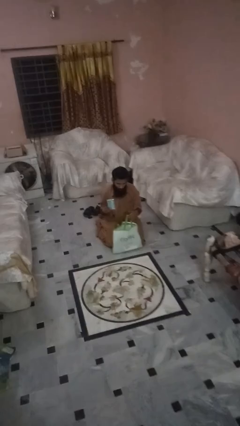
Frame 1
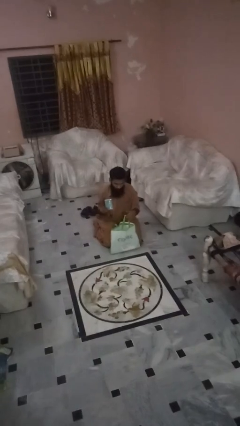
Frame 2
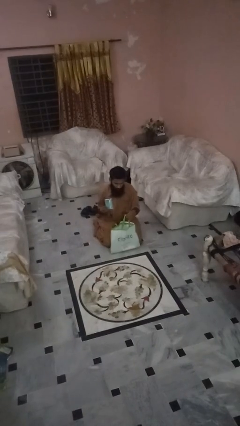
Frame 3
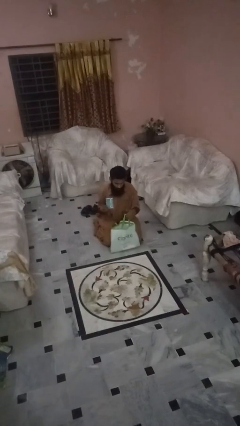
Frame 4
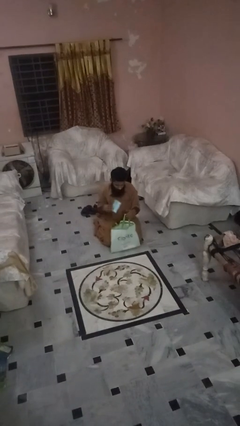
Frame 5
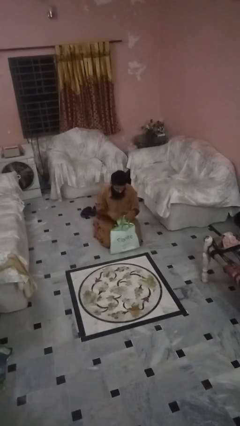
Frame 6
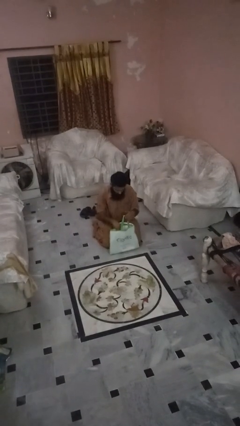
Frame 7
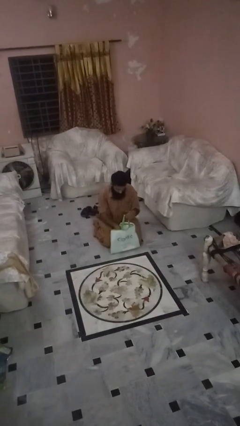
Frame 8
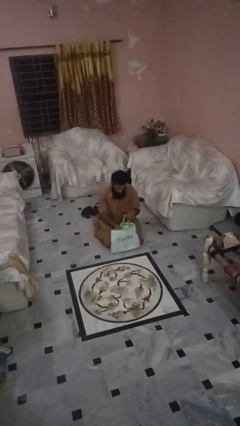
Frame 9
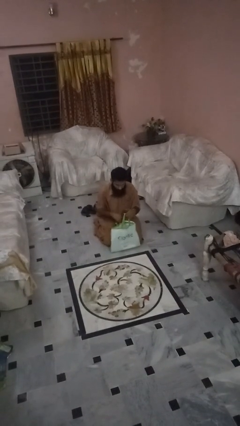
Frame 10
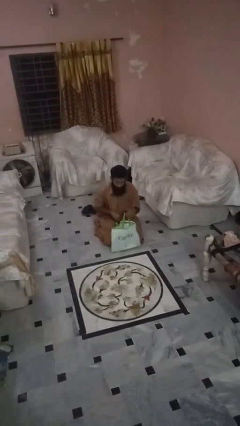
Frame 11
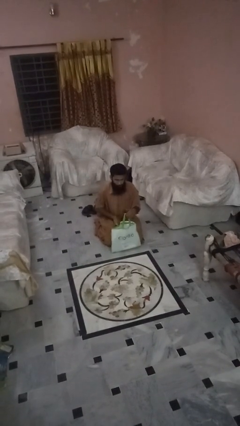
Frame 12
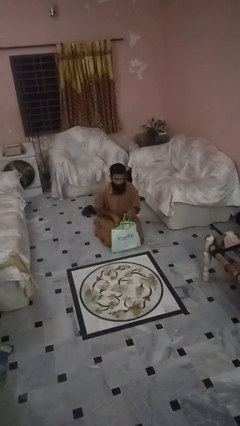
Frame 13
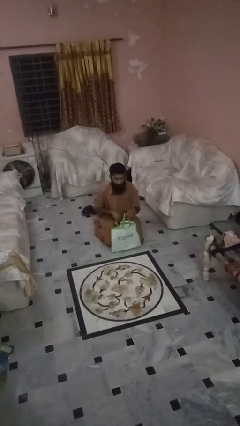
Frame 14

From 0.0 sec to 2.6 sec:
person puts object into bag

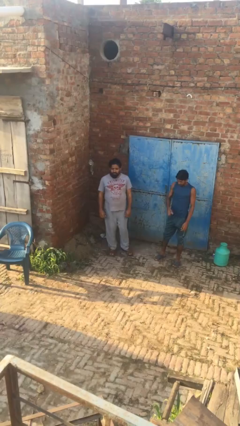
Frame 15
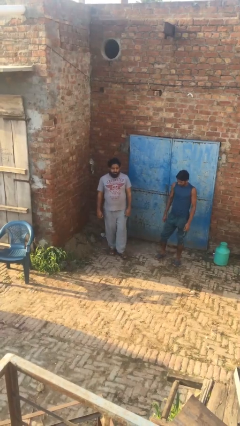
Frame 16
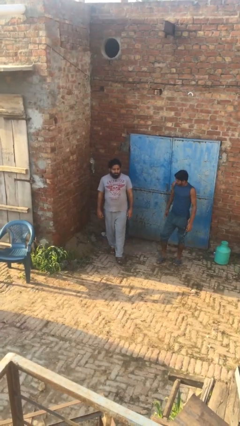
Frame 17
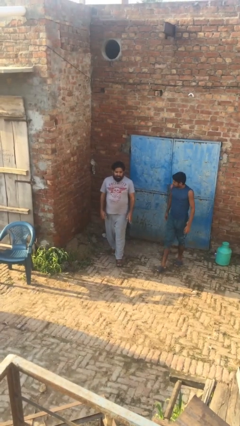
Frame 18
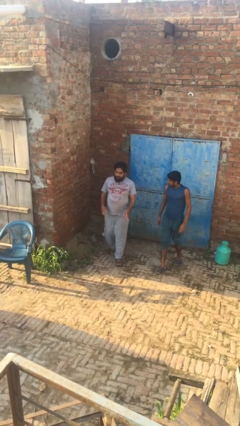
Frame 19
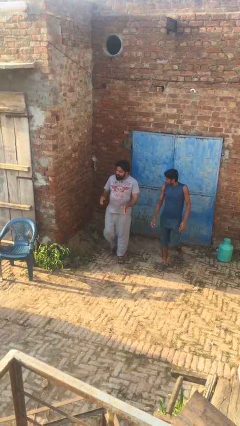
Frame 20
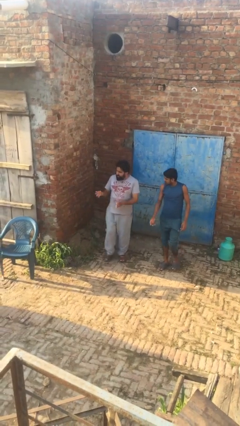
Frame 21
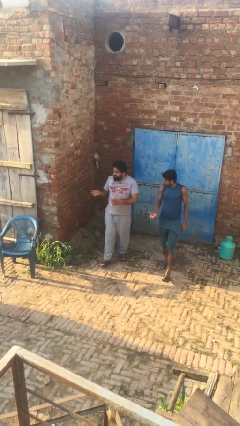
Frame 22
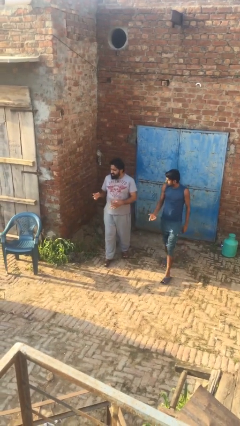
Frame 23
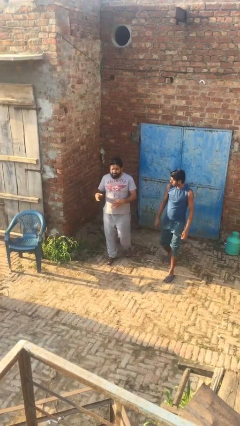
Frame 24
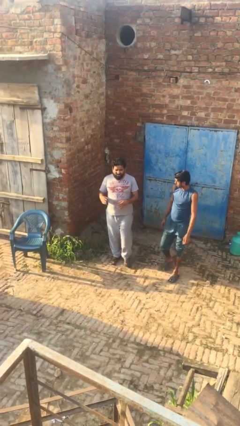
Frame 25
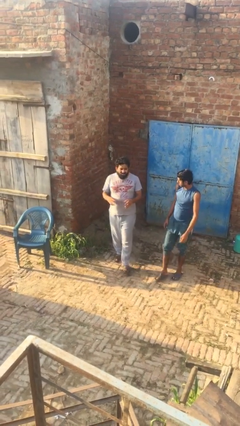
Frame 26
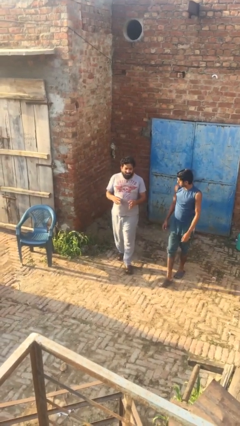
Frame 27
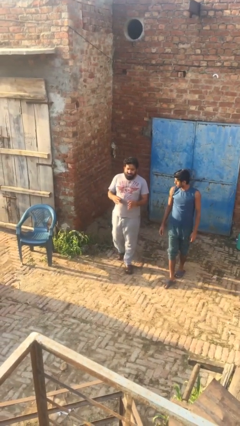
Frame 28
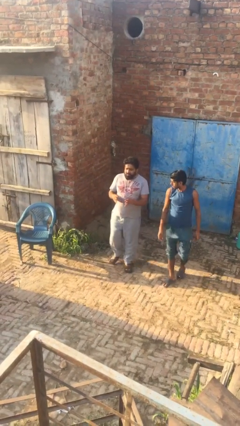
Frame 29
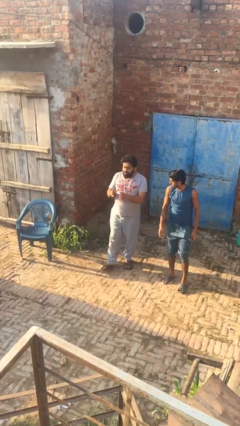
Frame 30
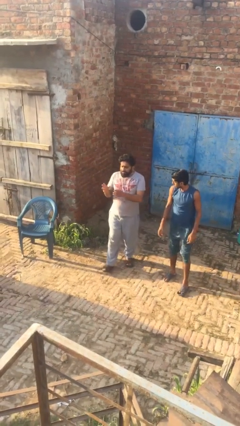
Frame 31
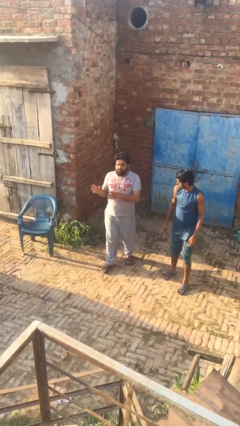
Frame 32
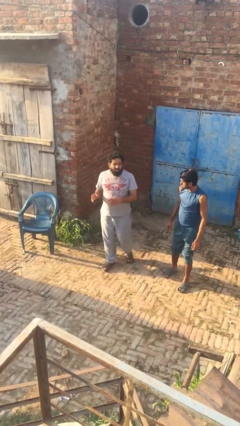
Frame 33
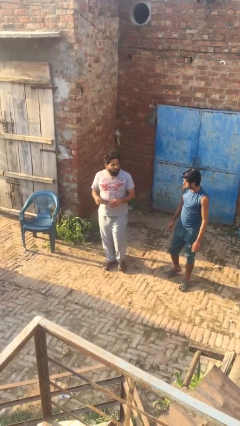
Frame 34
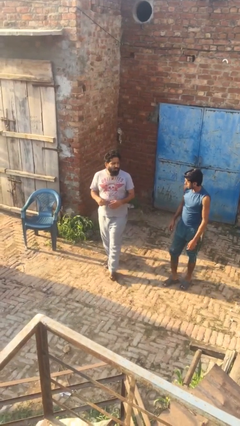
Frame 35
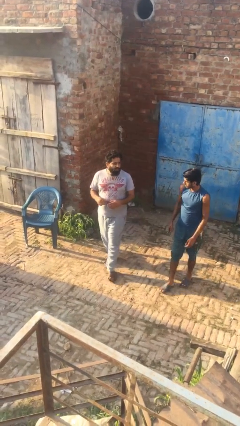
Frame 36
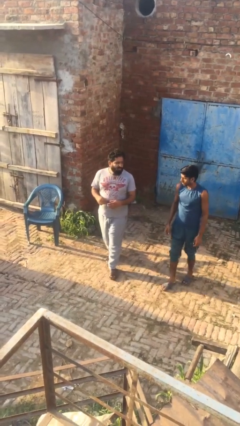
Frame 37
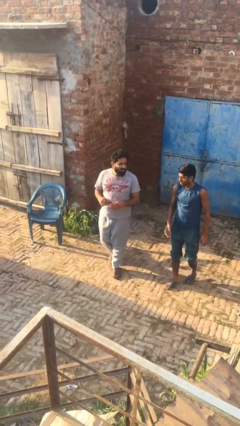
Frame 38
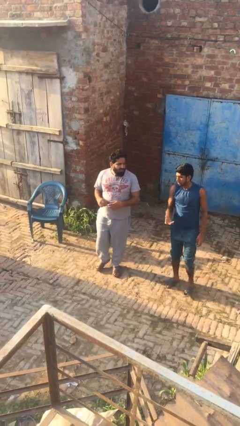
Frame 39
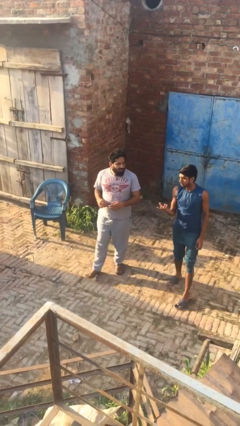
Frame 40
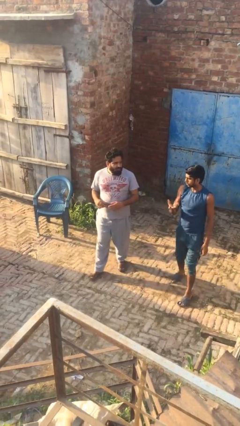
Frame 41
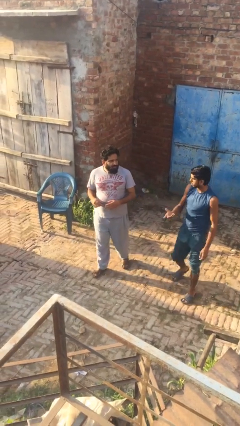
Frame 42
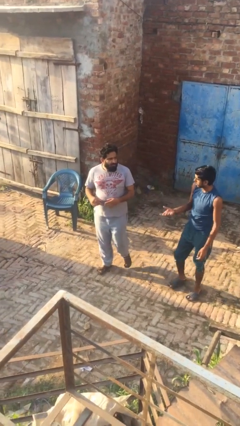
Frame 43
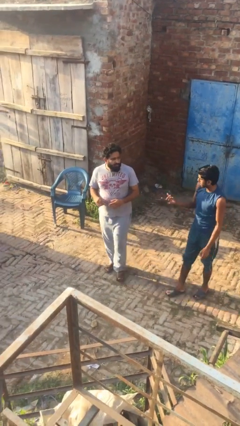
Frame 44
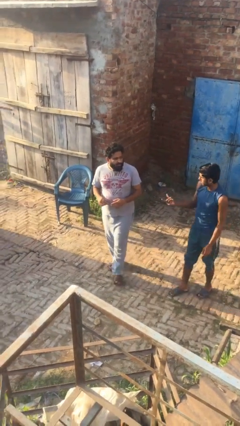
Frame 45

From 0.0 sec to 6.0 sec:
person talks to person

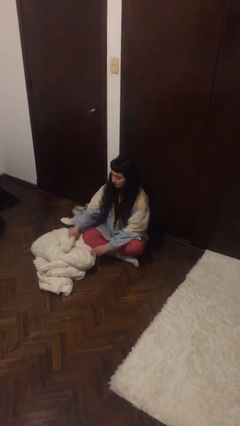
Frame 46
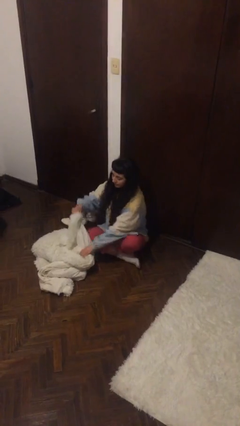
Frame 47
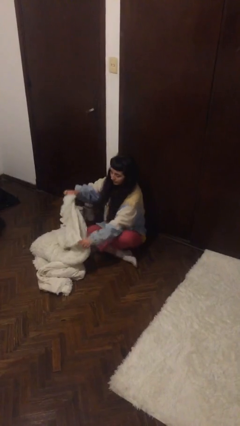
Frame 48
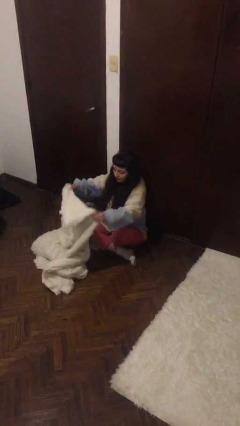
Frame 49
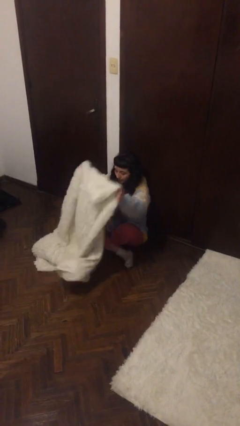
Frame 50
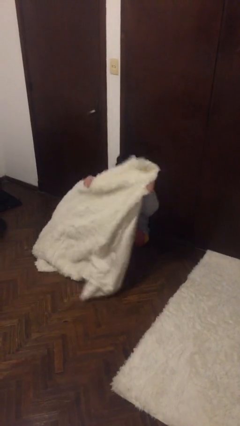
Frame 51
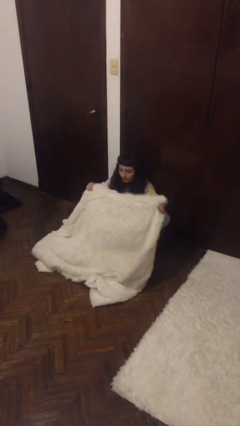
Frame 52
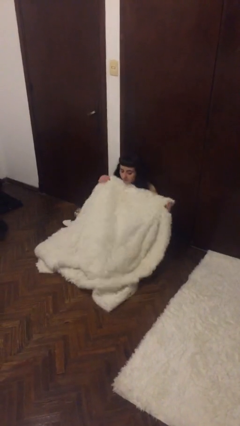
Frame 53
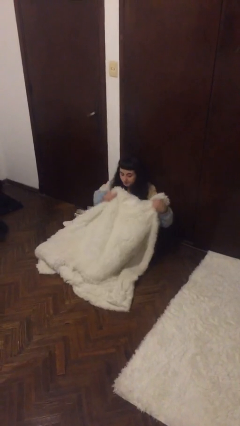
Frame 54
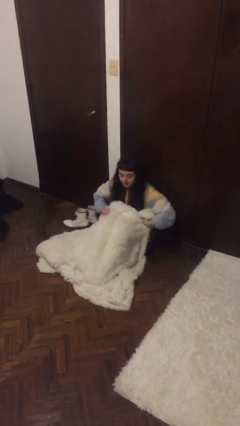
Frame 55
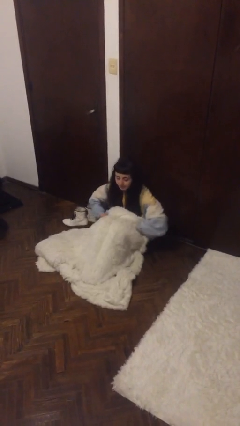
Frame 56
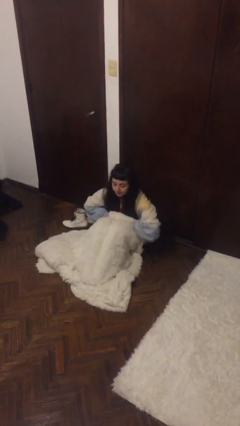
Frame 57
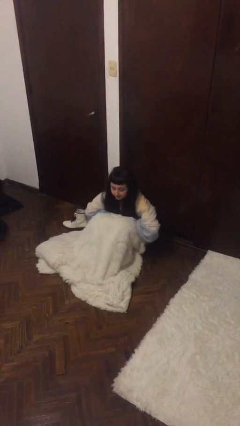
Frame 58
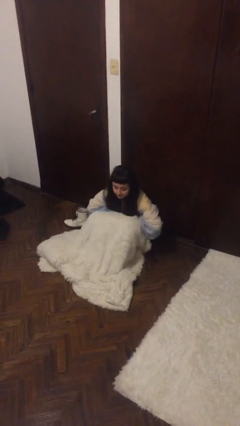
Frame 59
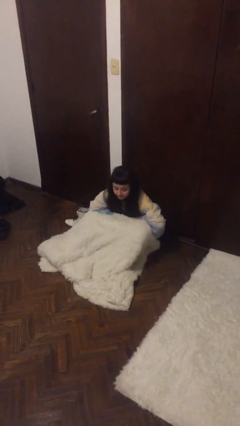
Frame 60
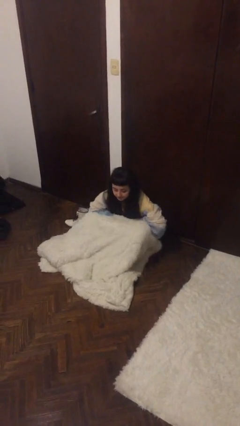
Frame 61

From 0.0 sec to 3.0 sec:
person covers with blanket

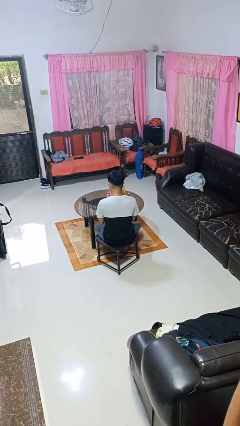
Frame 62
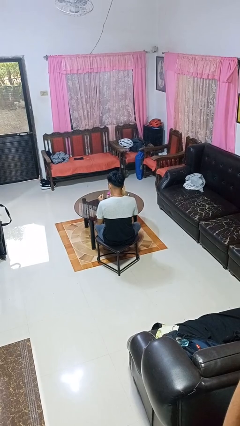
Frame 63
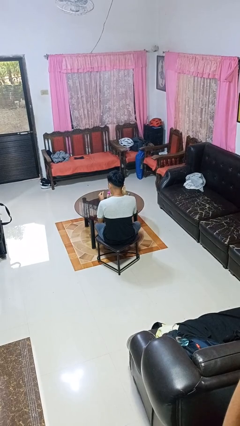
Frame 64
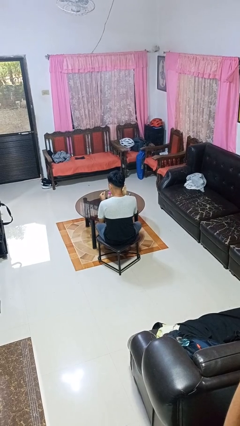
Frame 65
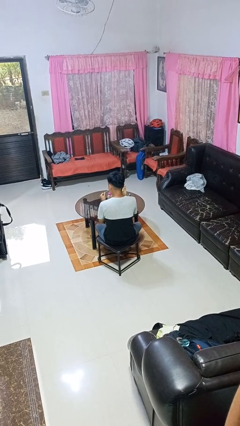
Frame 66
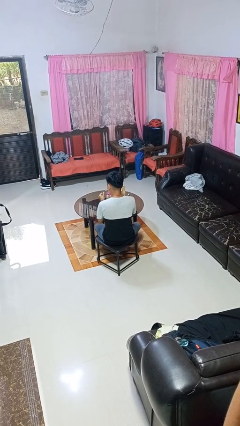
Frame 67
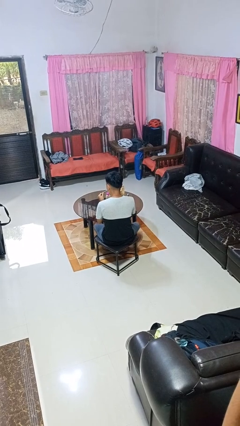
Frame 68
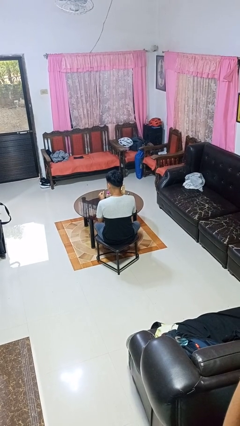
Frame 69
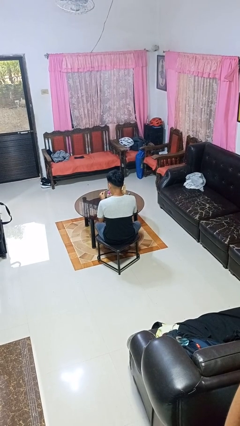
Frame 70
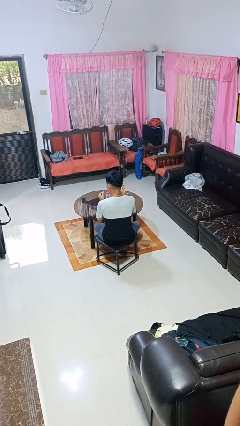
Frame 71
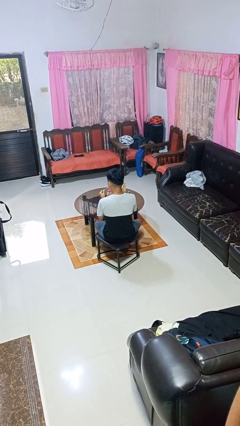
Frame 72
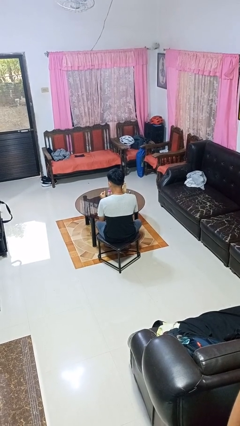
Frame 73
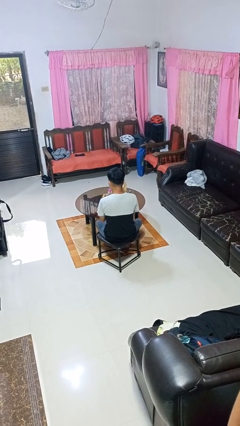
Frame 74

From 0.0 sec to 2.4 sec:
person paints fingernails

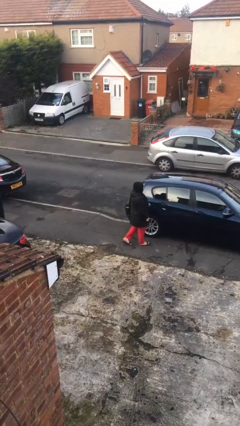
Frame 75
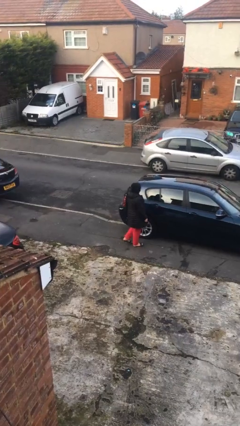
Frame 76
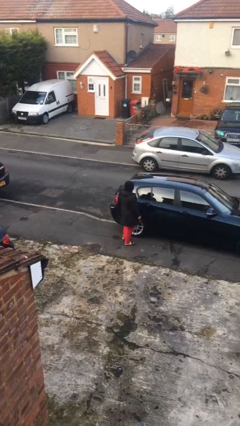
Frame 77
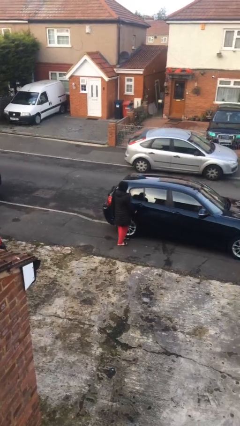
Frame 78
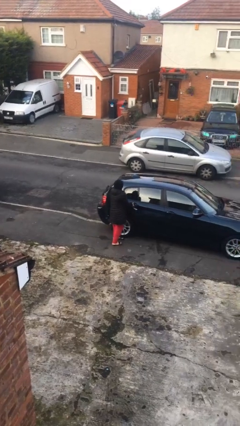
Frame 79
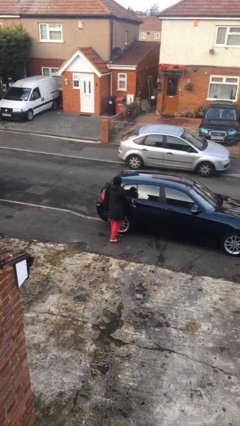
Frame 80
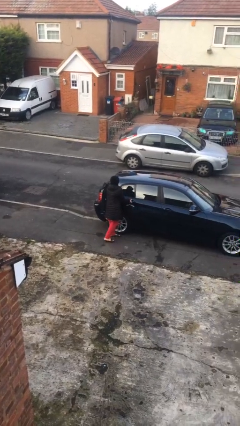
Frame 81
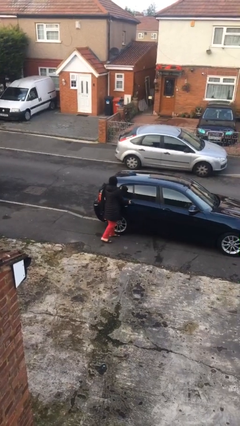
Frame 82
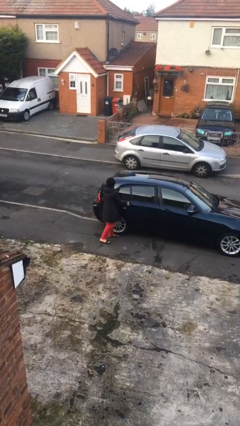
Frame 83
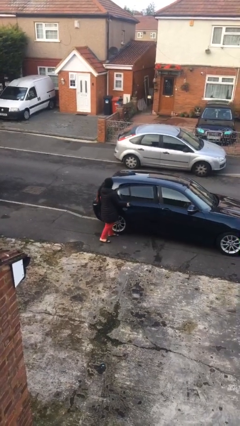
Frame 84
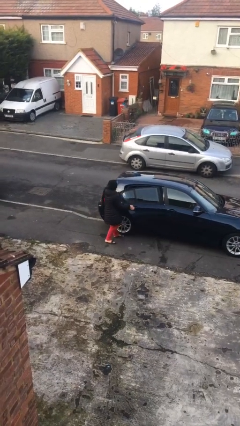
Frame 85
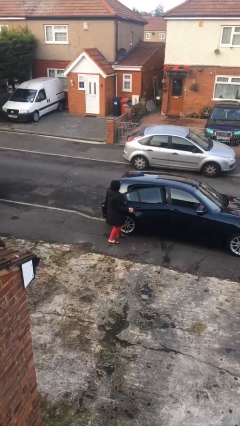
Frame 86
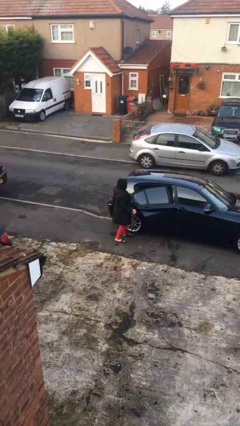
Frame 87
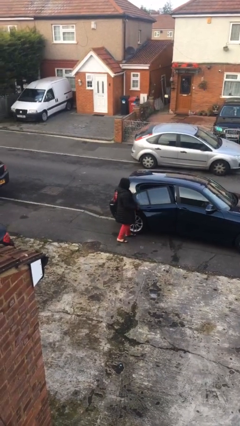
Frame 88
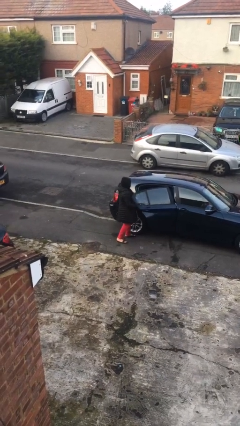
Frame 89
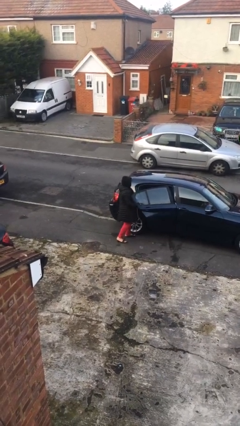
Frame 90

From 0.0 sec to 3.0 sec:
person opens car door

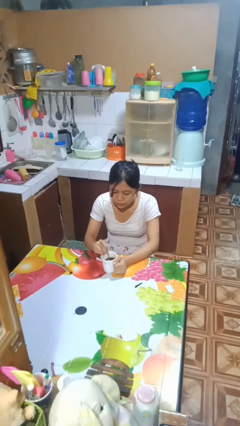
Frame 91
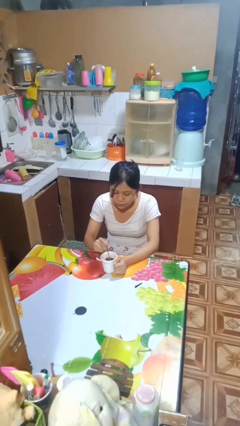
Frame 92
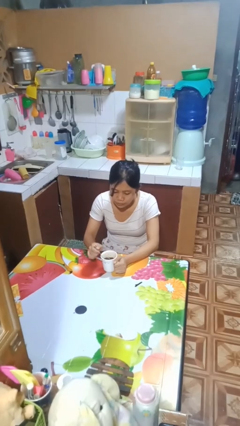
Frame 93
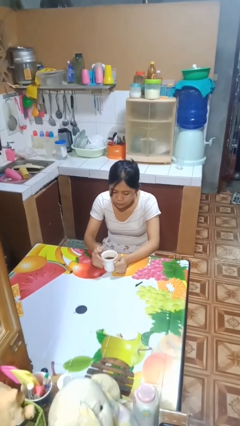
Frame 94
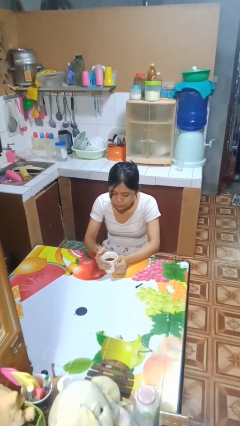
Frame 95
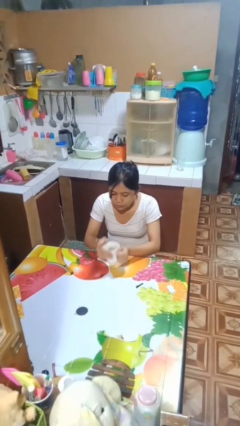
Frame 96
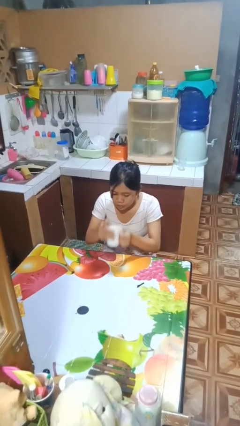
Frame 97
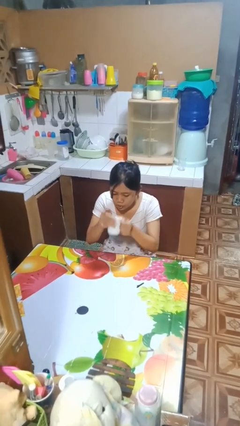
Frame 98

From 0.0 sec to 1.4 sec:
person stirs mug
